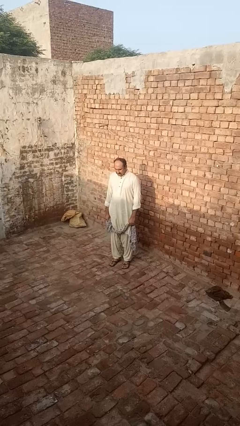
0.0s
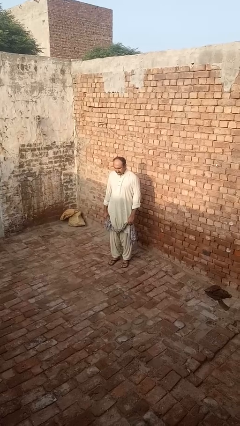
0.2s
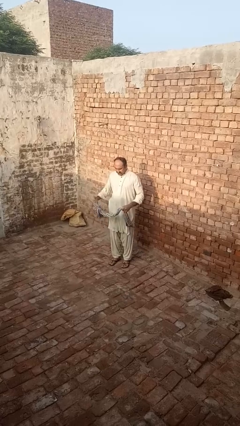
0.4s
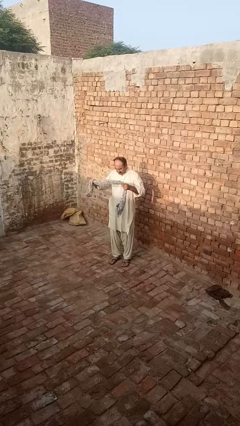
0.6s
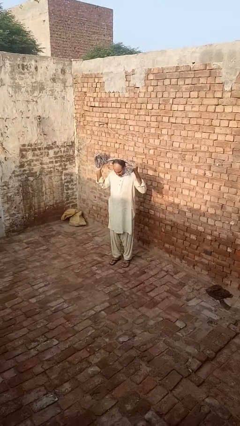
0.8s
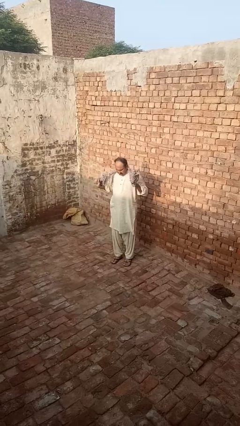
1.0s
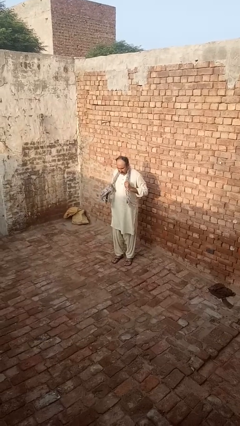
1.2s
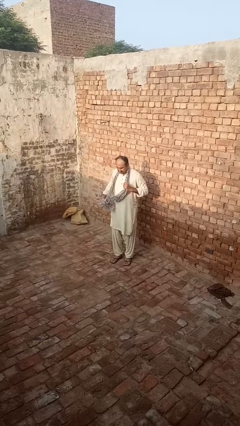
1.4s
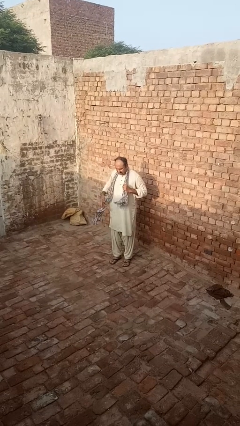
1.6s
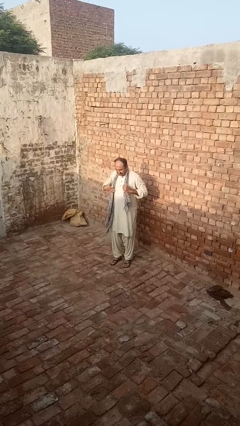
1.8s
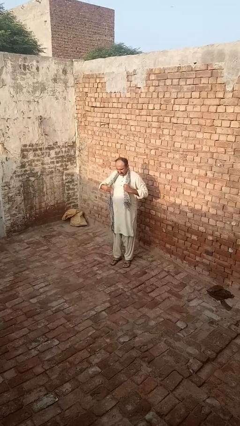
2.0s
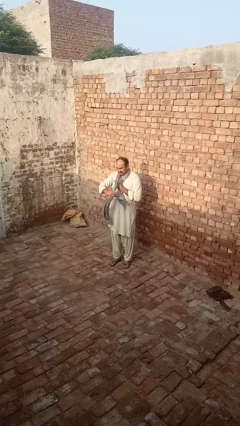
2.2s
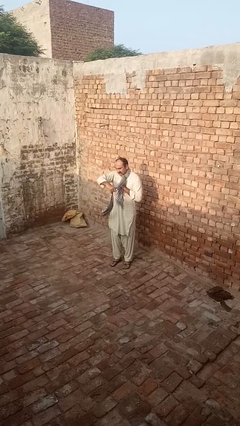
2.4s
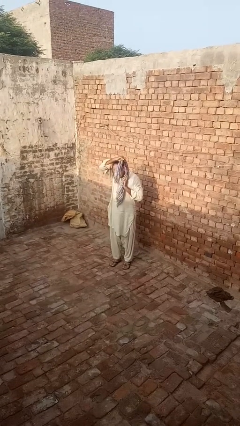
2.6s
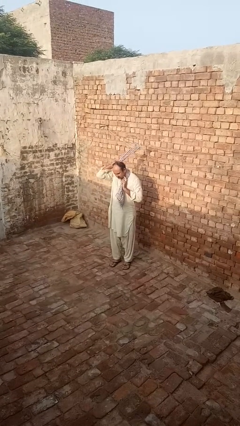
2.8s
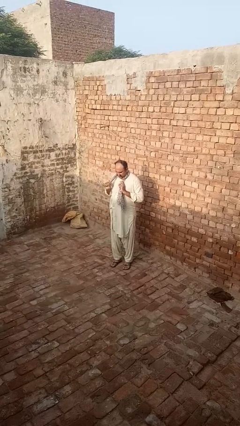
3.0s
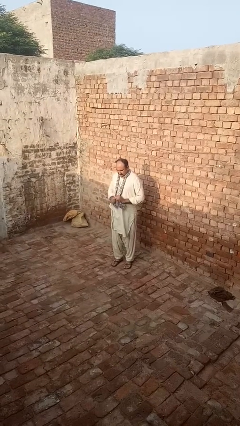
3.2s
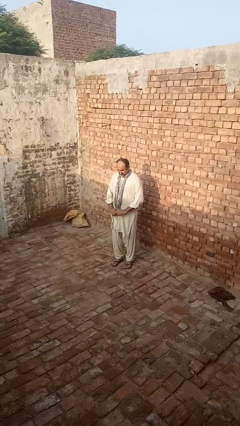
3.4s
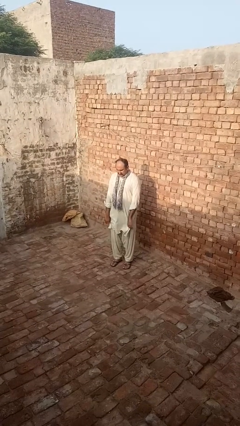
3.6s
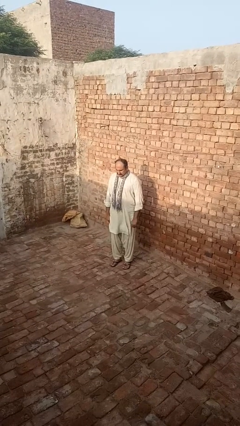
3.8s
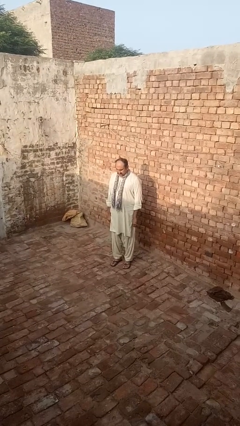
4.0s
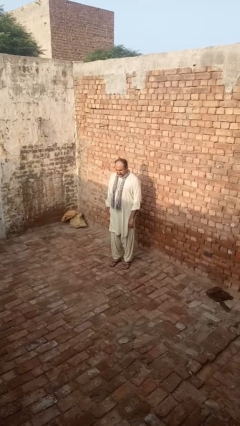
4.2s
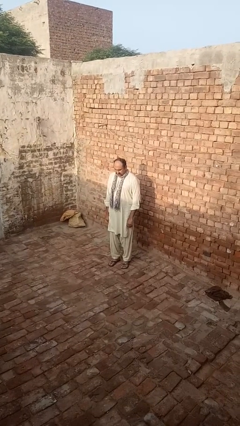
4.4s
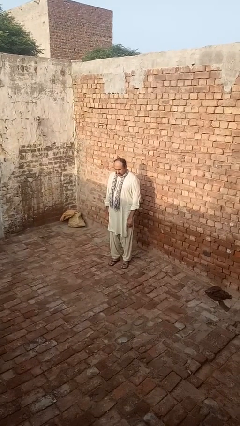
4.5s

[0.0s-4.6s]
person puts on scarf

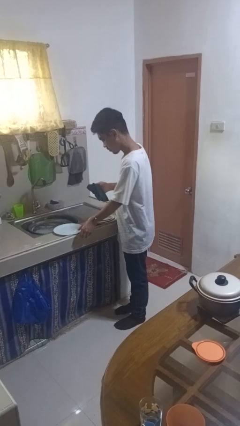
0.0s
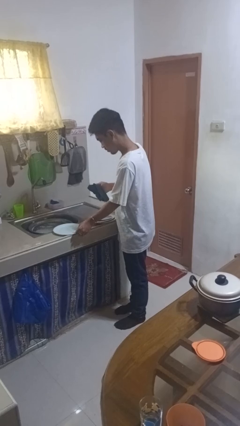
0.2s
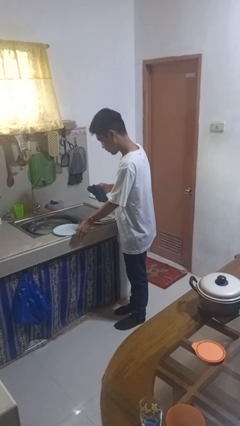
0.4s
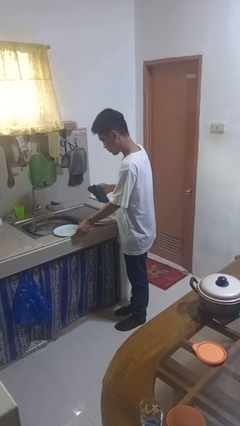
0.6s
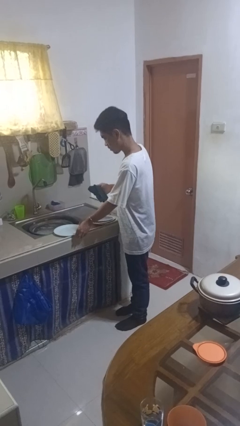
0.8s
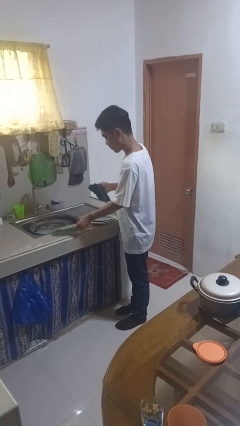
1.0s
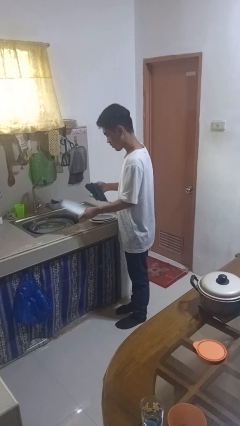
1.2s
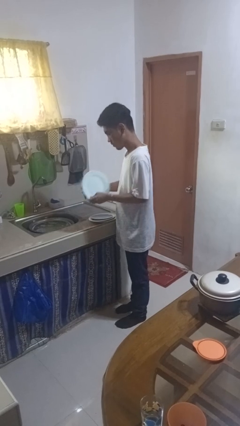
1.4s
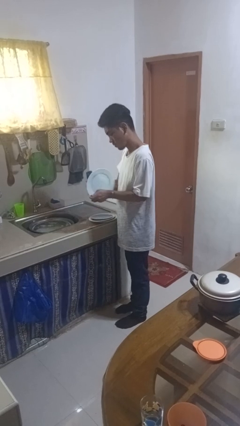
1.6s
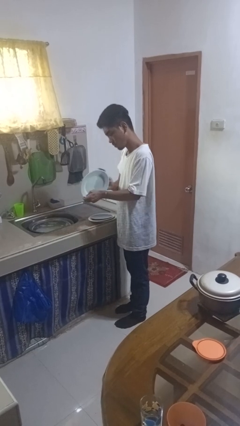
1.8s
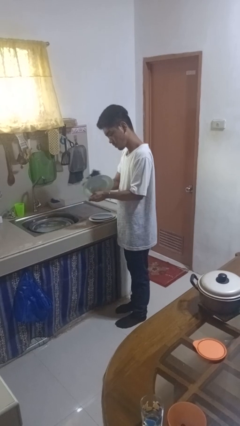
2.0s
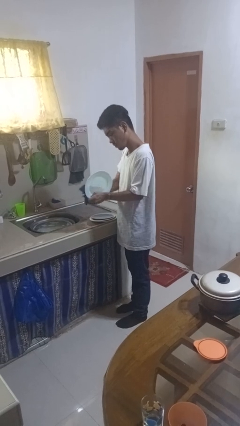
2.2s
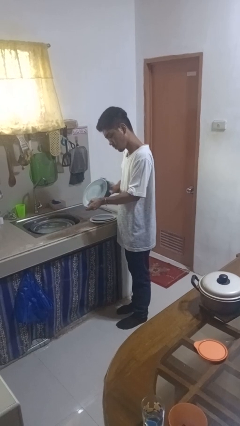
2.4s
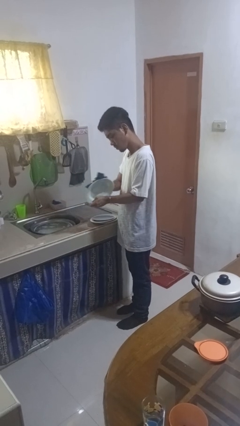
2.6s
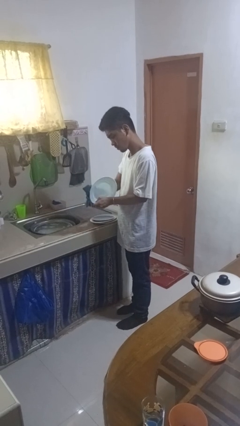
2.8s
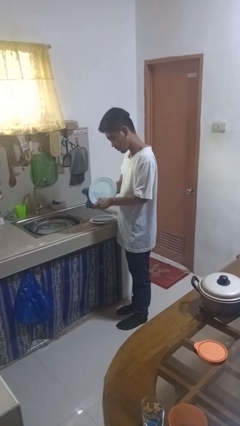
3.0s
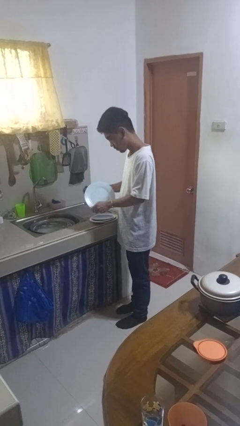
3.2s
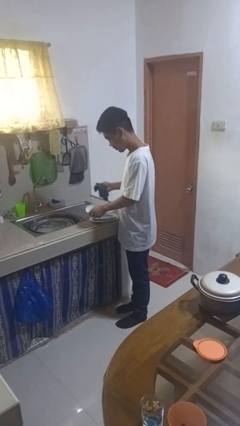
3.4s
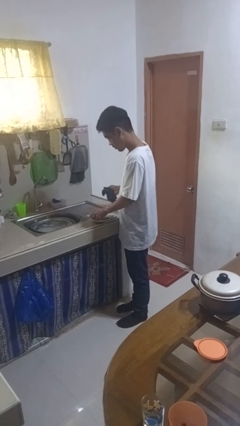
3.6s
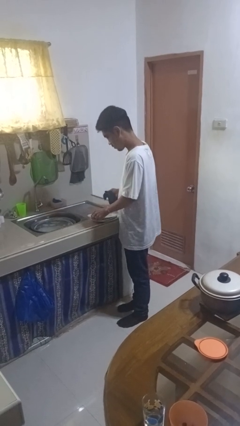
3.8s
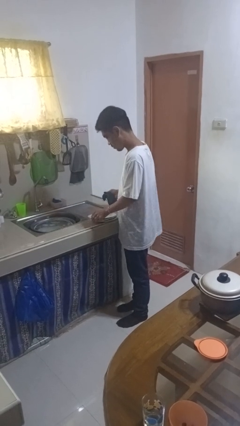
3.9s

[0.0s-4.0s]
person dries dish

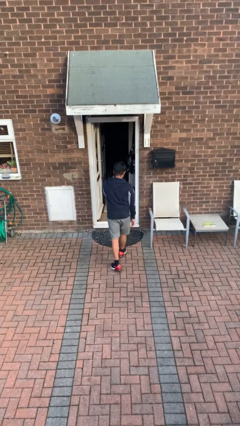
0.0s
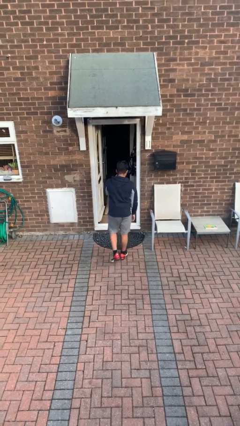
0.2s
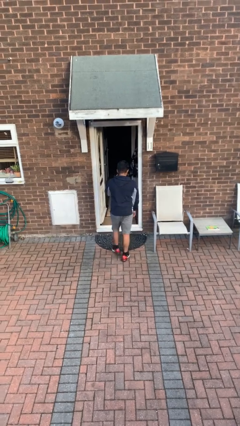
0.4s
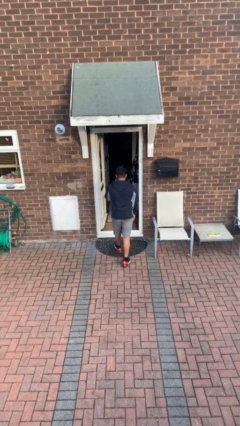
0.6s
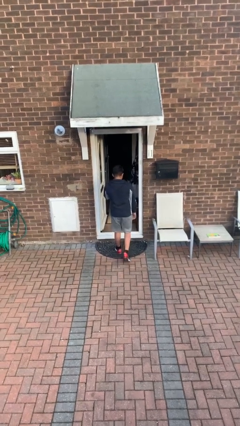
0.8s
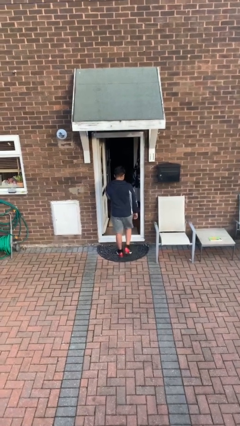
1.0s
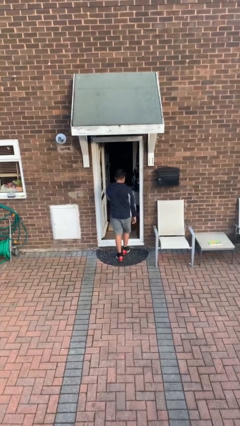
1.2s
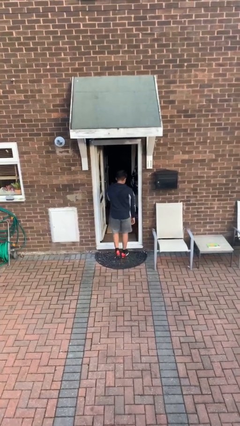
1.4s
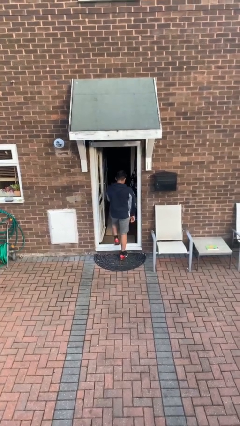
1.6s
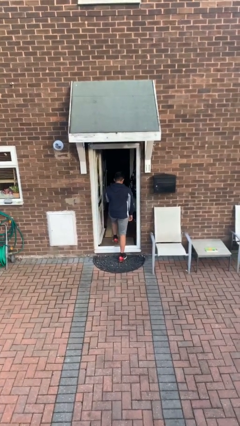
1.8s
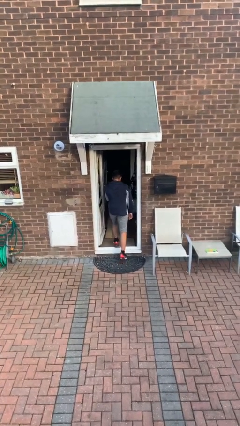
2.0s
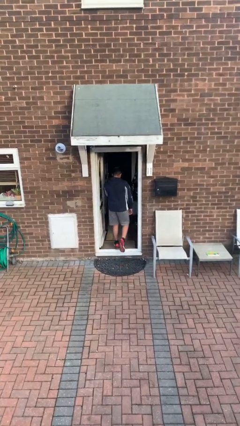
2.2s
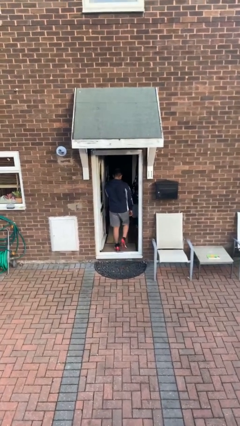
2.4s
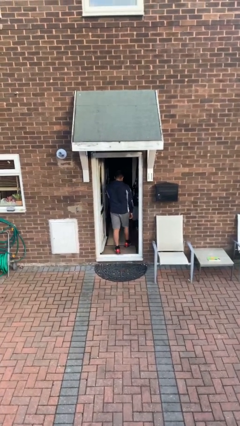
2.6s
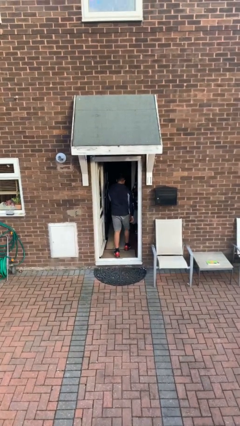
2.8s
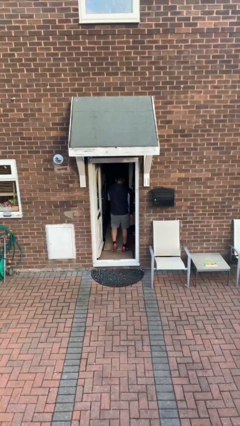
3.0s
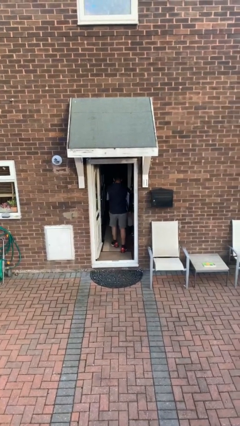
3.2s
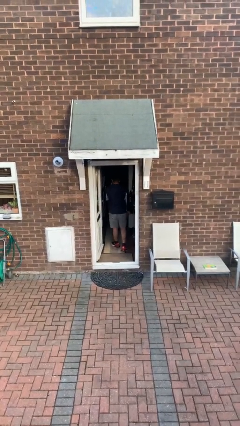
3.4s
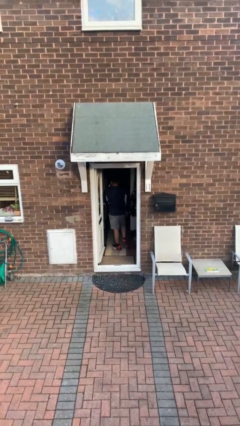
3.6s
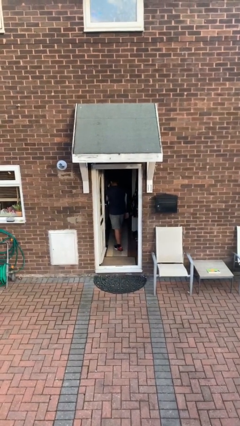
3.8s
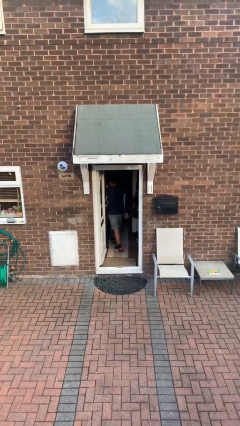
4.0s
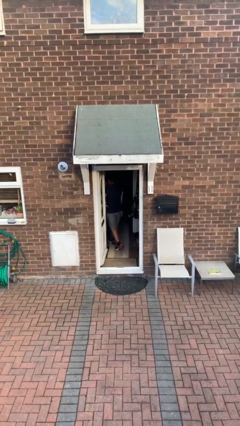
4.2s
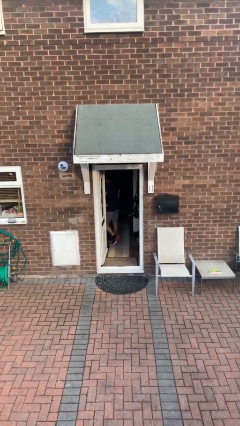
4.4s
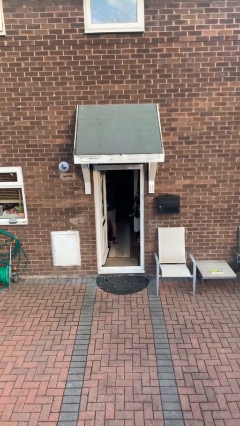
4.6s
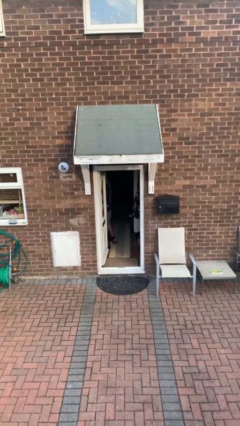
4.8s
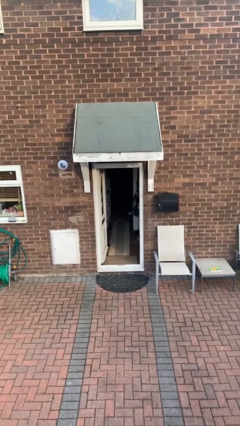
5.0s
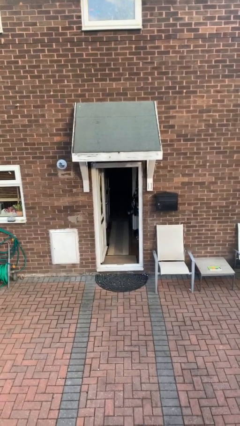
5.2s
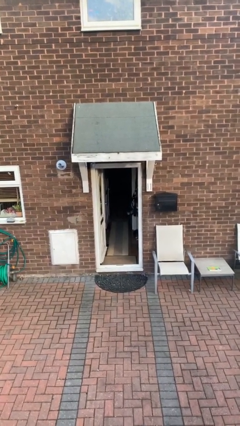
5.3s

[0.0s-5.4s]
person exits scene through structure

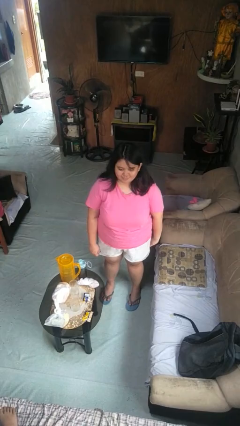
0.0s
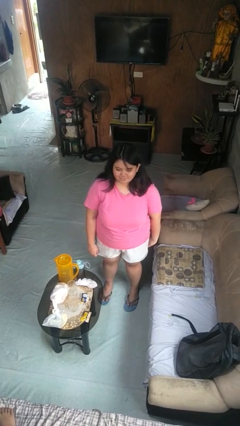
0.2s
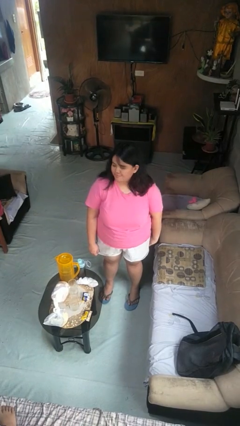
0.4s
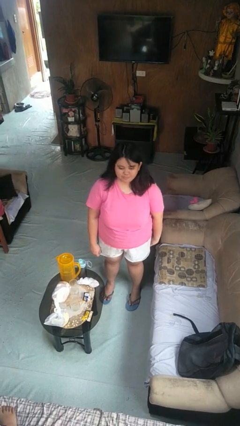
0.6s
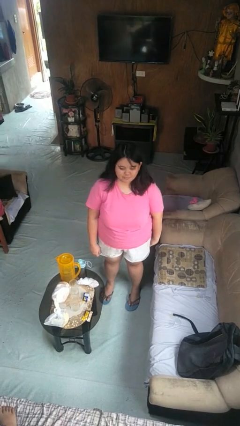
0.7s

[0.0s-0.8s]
person shakes head

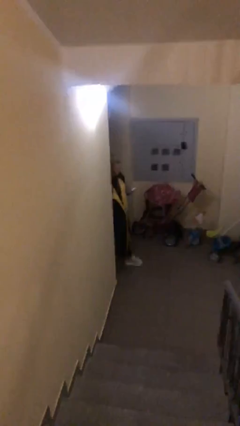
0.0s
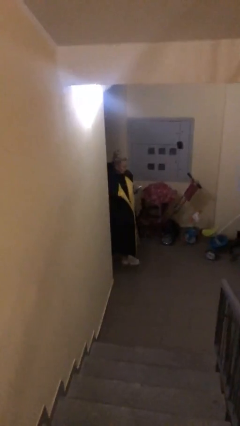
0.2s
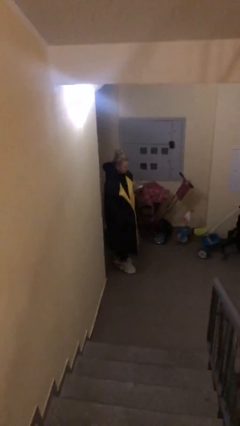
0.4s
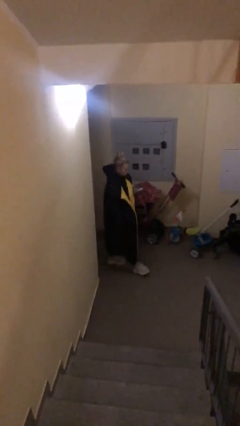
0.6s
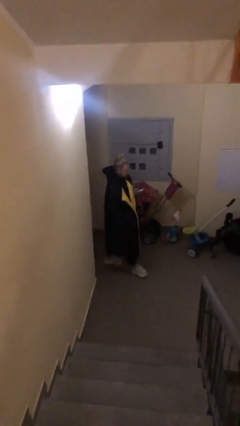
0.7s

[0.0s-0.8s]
person enters scene through structure

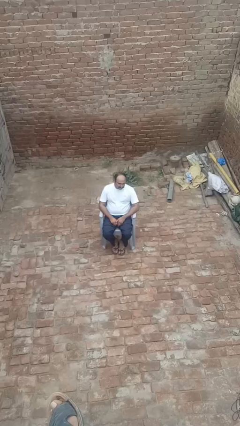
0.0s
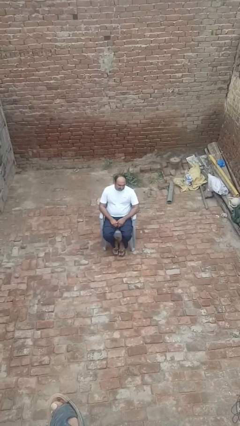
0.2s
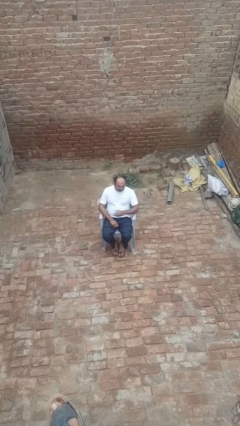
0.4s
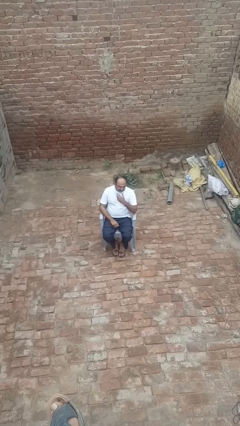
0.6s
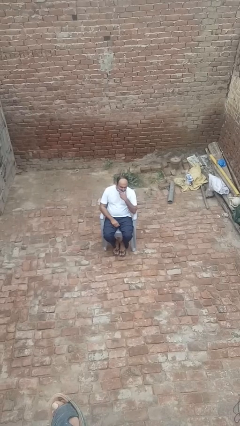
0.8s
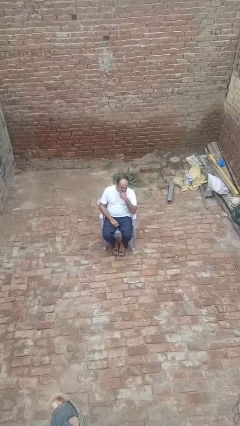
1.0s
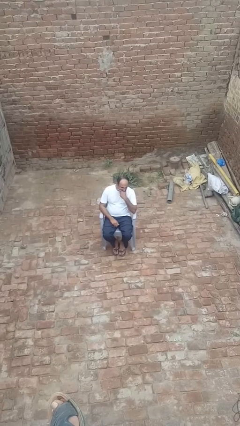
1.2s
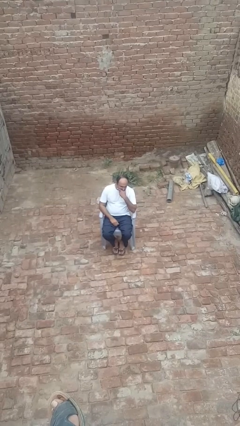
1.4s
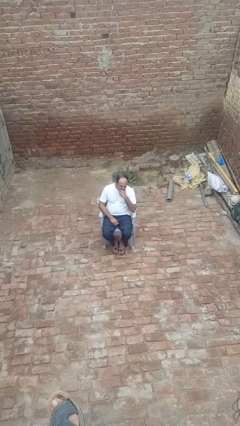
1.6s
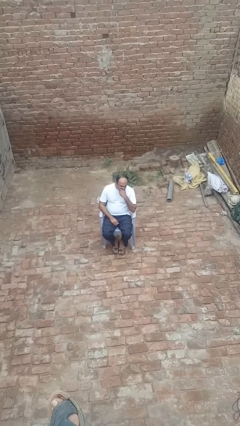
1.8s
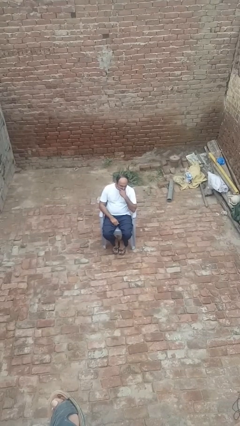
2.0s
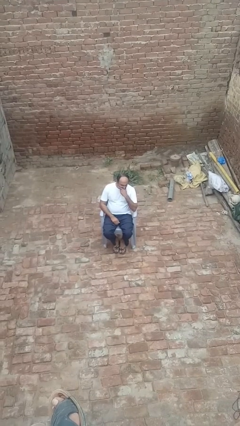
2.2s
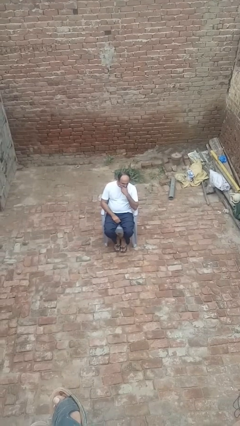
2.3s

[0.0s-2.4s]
person strokes chin
